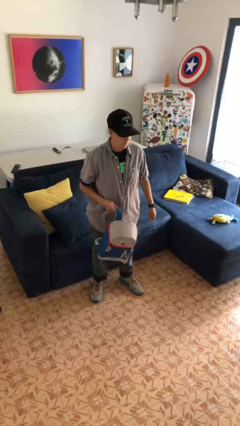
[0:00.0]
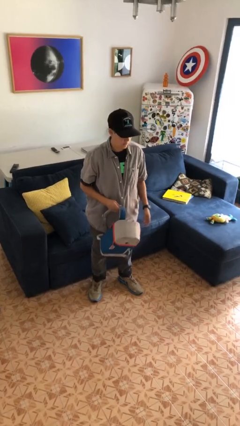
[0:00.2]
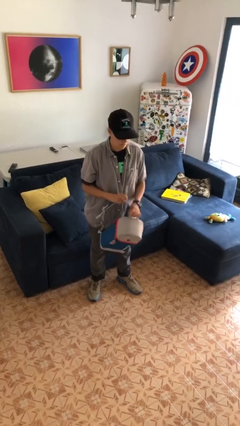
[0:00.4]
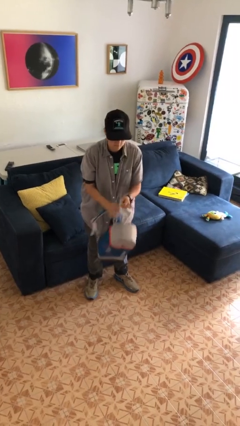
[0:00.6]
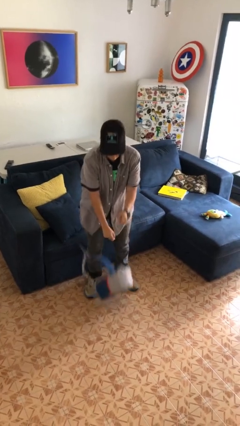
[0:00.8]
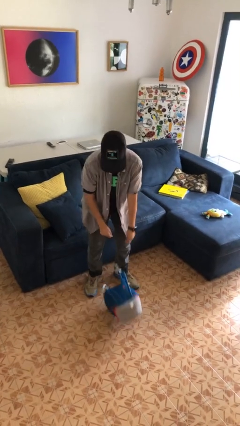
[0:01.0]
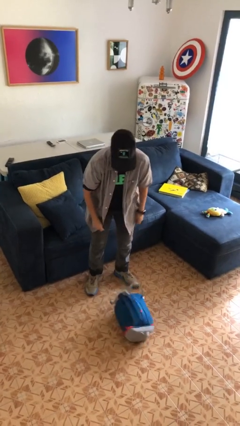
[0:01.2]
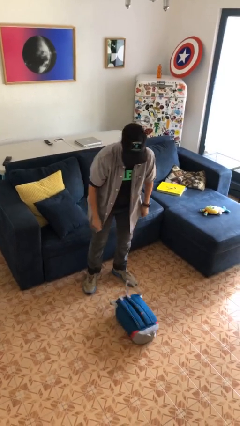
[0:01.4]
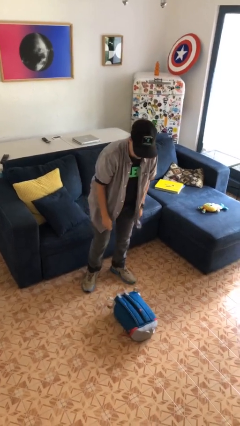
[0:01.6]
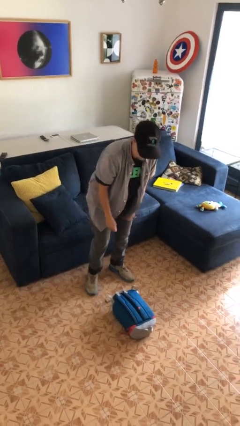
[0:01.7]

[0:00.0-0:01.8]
person drops object

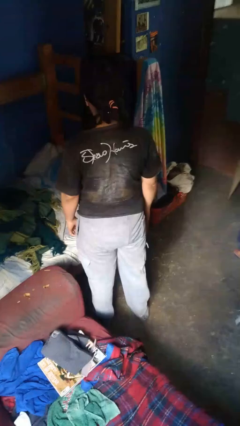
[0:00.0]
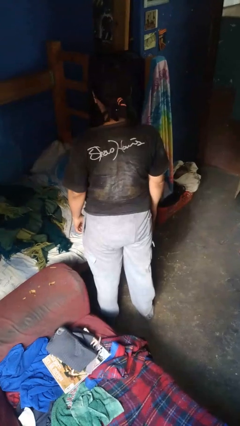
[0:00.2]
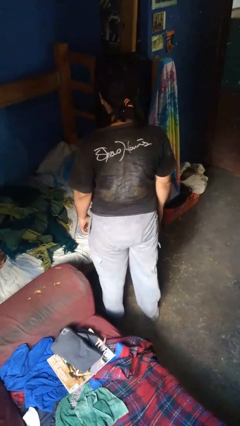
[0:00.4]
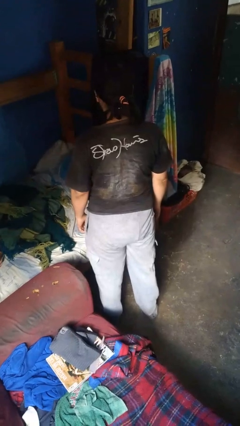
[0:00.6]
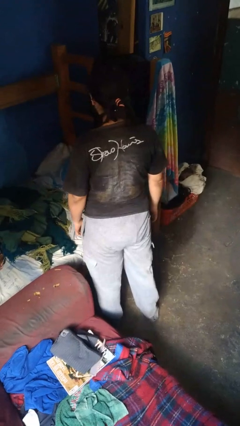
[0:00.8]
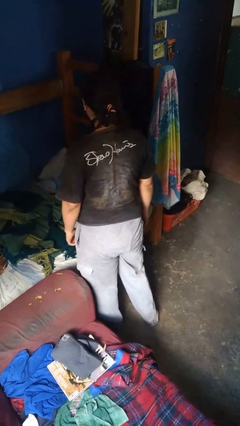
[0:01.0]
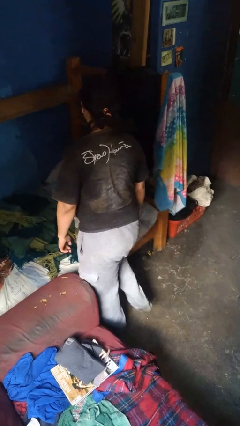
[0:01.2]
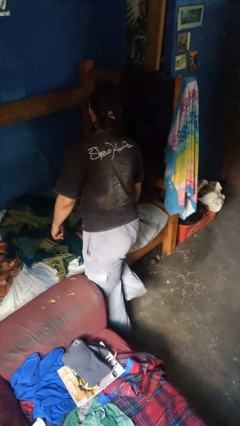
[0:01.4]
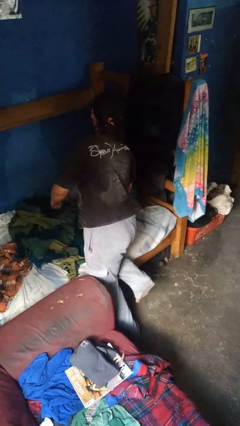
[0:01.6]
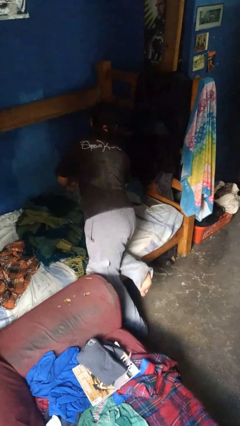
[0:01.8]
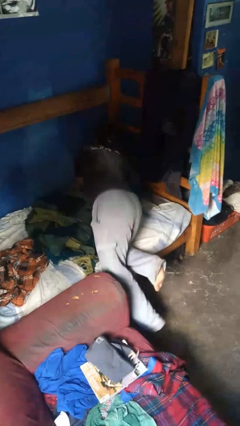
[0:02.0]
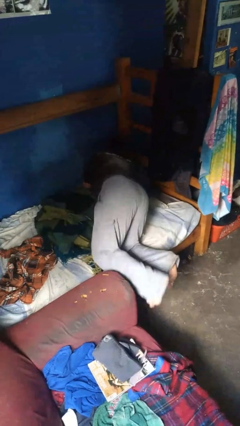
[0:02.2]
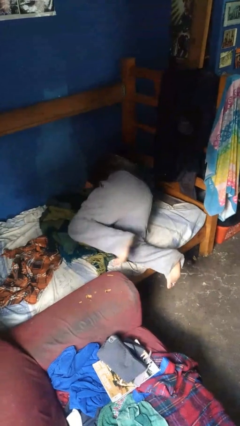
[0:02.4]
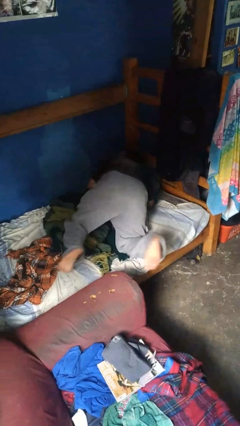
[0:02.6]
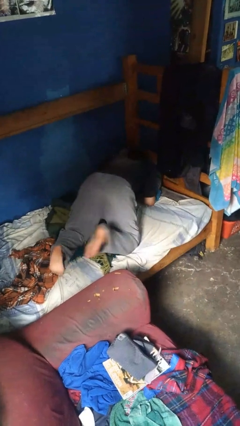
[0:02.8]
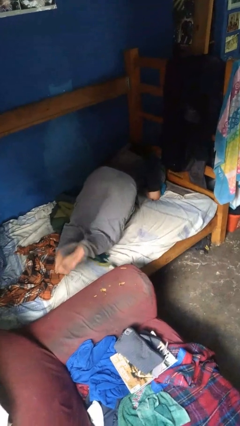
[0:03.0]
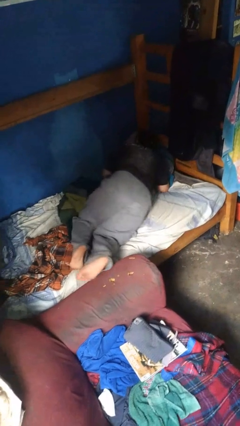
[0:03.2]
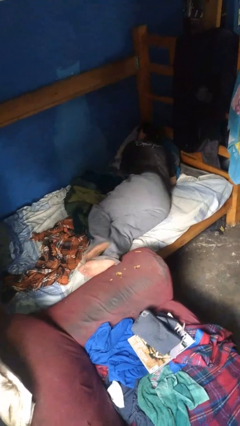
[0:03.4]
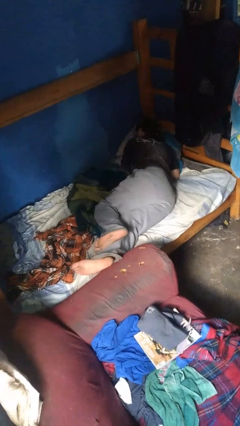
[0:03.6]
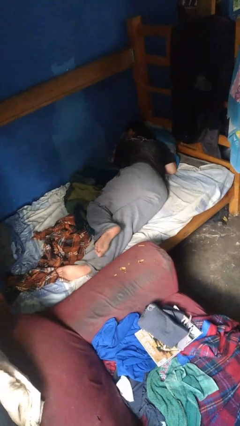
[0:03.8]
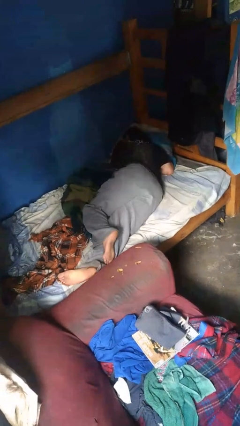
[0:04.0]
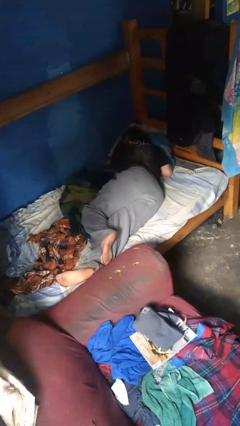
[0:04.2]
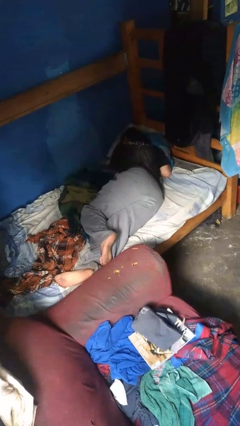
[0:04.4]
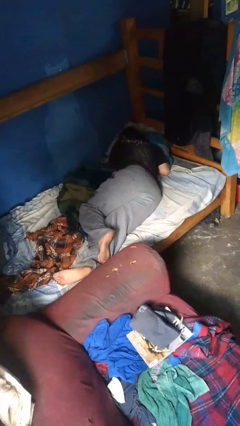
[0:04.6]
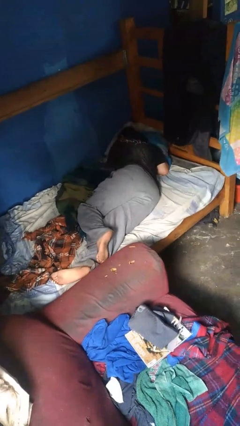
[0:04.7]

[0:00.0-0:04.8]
person lies down on bed

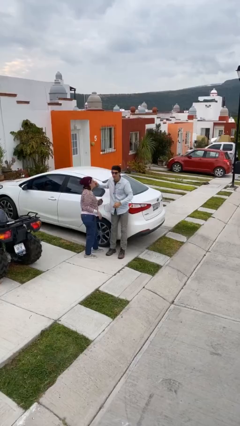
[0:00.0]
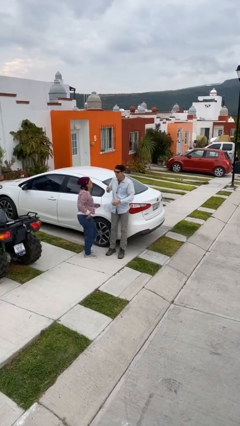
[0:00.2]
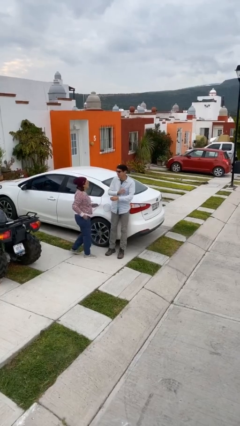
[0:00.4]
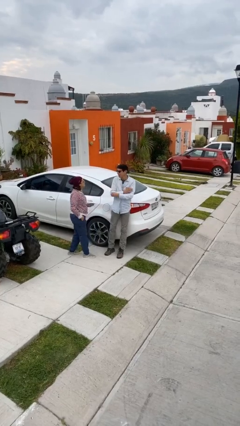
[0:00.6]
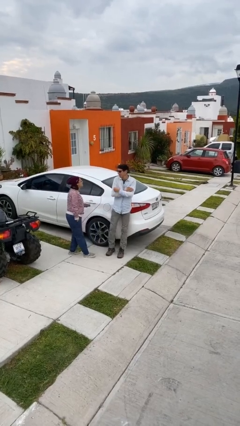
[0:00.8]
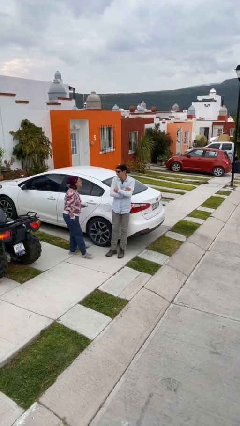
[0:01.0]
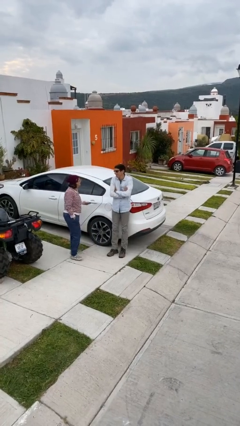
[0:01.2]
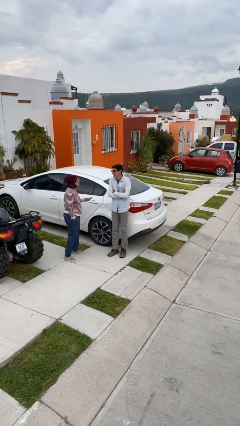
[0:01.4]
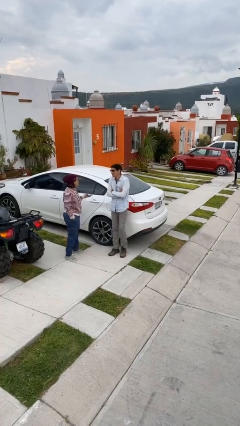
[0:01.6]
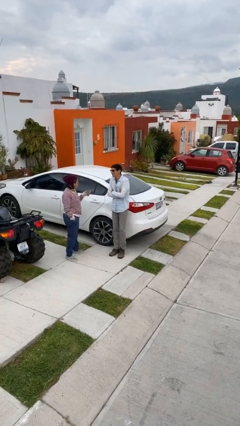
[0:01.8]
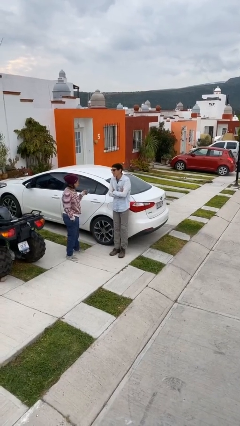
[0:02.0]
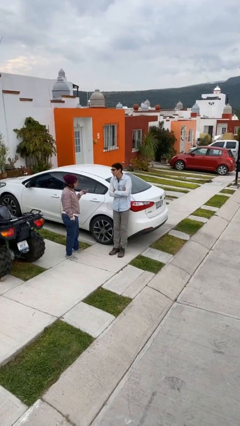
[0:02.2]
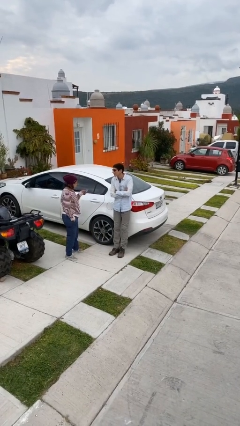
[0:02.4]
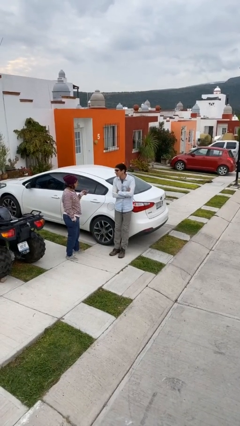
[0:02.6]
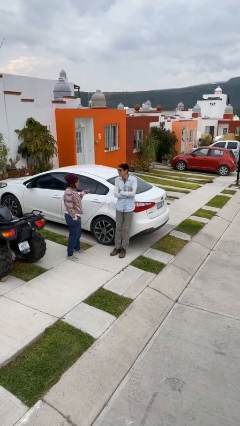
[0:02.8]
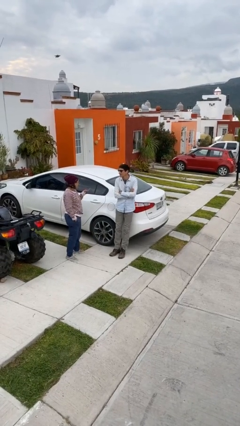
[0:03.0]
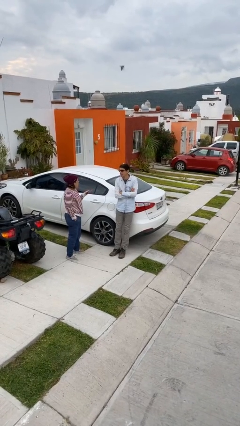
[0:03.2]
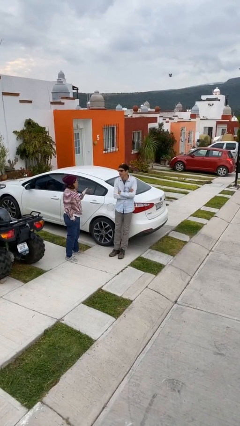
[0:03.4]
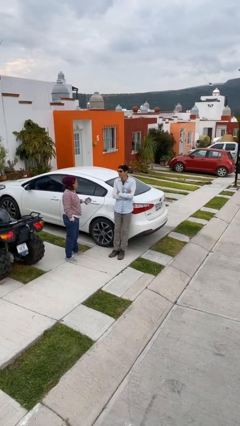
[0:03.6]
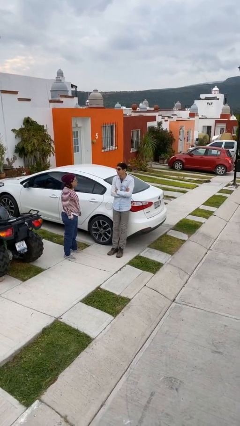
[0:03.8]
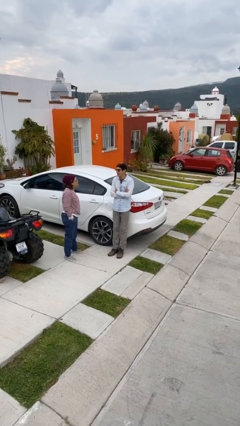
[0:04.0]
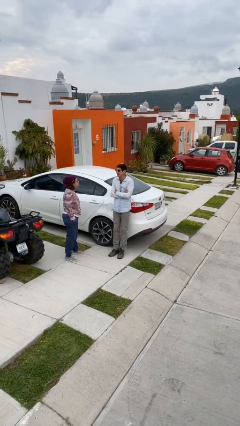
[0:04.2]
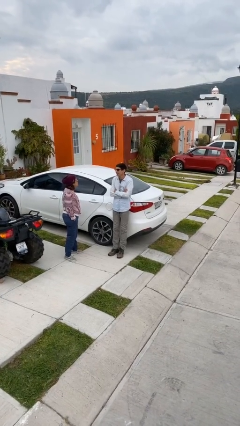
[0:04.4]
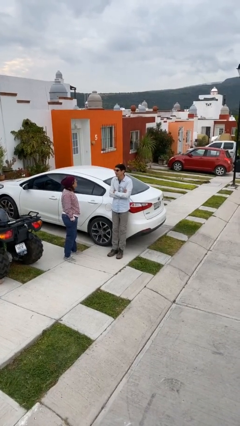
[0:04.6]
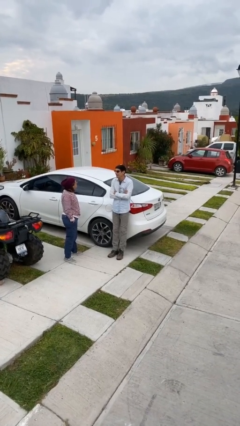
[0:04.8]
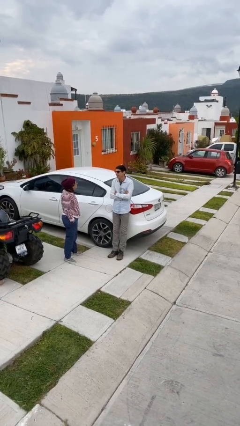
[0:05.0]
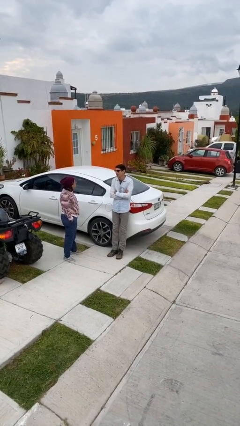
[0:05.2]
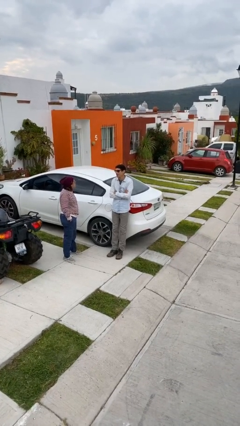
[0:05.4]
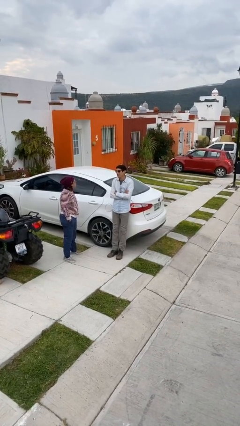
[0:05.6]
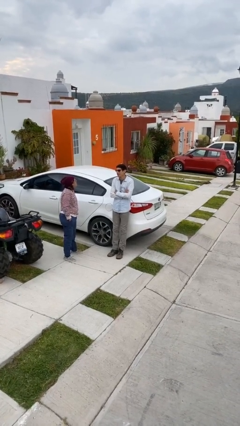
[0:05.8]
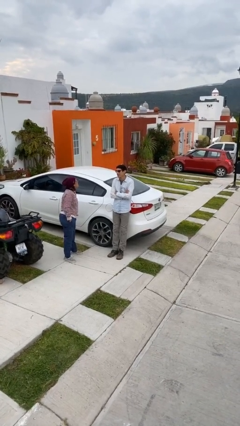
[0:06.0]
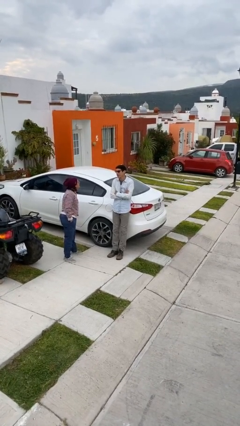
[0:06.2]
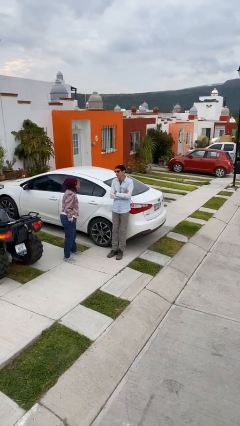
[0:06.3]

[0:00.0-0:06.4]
person talks to person

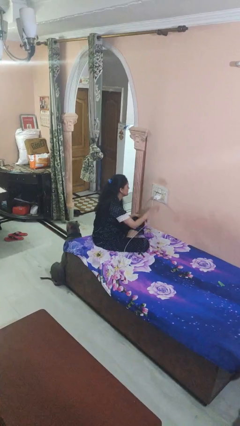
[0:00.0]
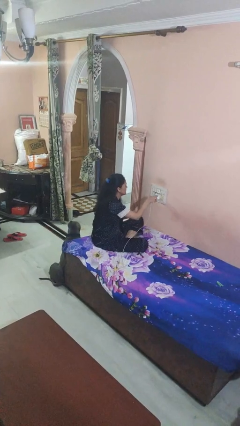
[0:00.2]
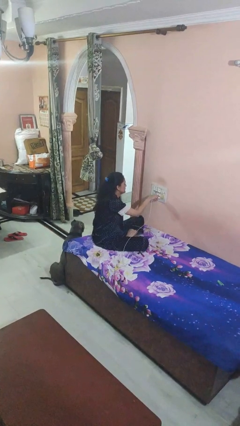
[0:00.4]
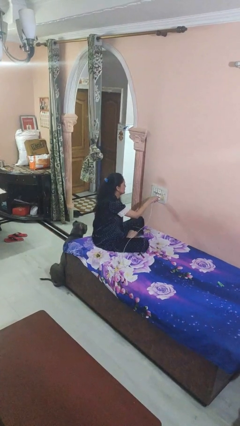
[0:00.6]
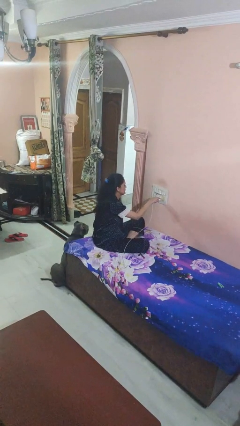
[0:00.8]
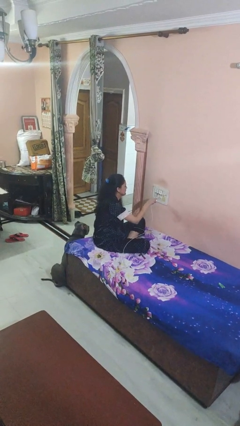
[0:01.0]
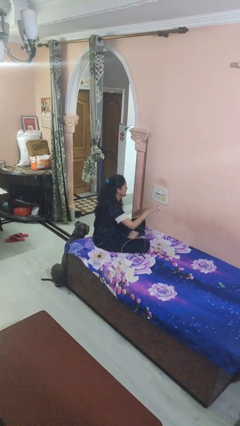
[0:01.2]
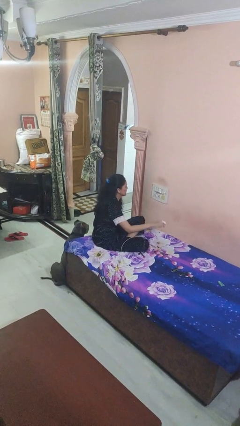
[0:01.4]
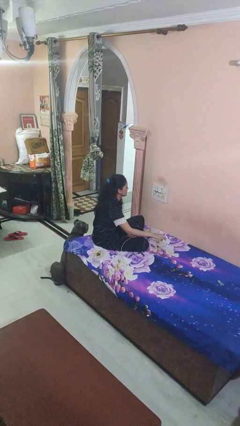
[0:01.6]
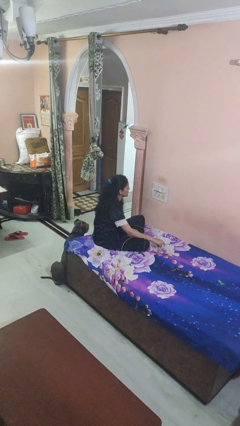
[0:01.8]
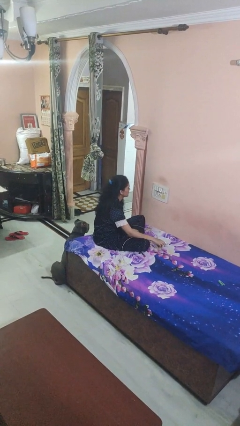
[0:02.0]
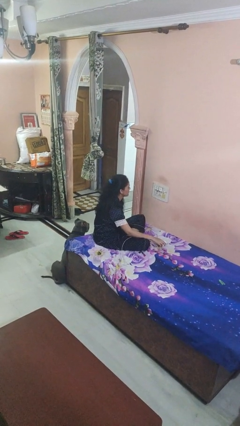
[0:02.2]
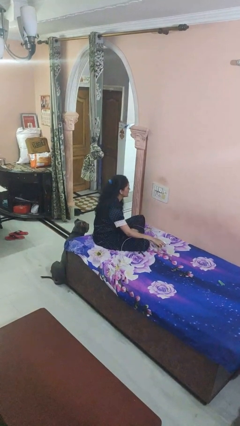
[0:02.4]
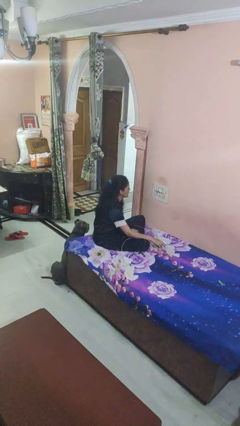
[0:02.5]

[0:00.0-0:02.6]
person unplugs from electrical socket

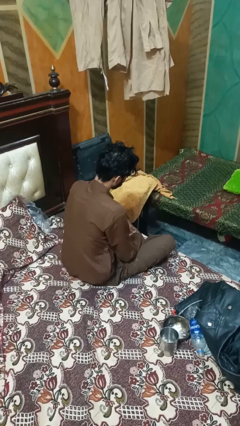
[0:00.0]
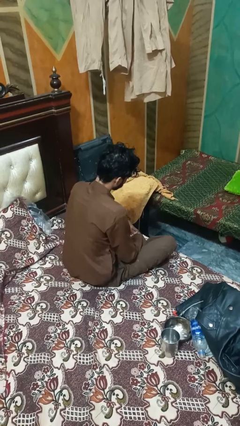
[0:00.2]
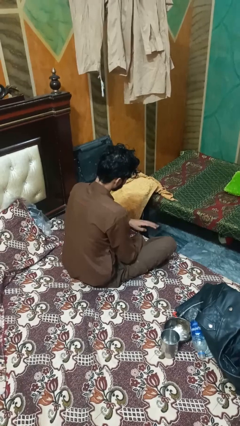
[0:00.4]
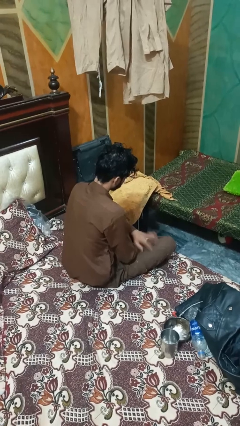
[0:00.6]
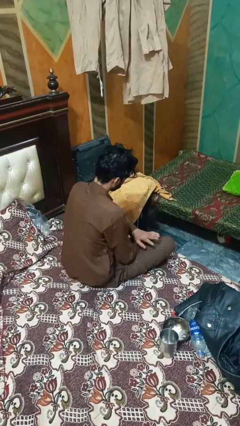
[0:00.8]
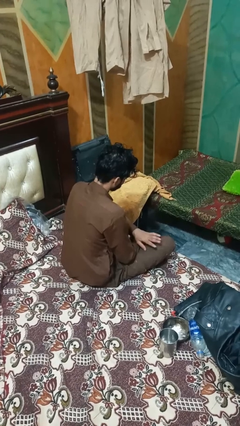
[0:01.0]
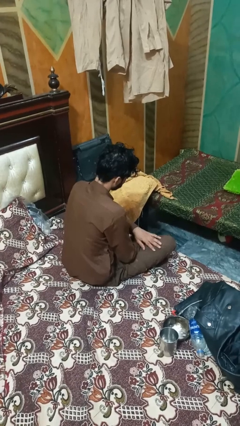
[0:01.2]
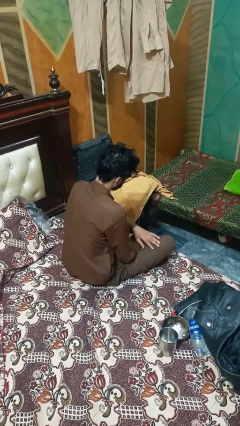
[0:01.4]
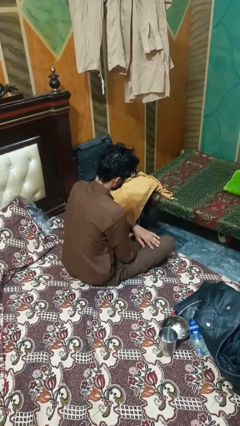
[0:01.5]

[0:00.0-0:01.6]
person slaps hands on thighs

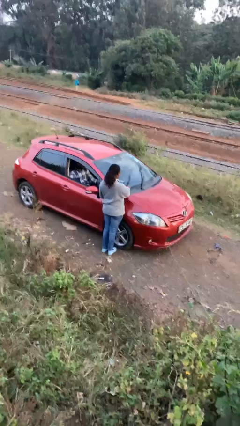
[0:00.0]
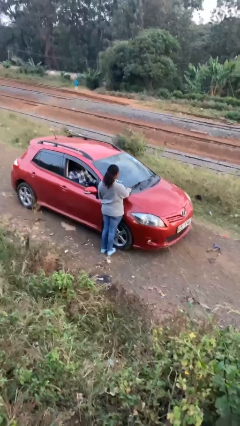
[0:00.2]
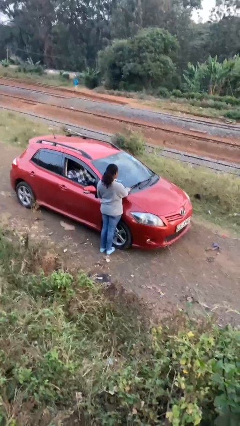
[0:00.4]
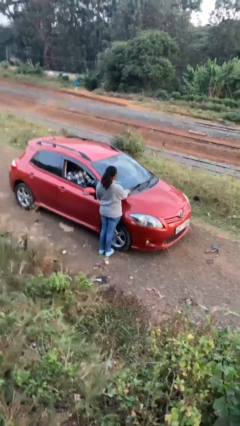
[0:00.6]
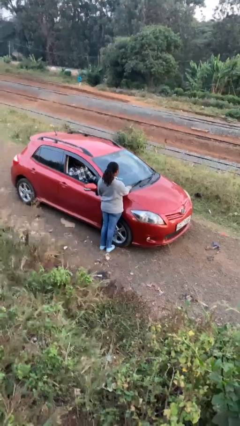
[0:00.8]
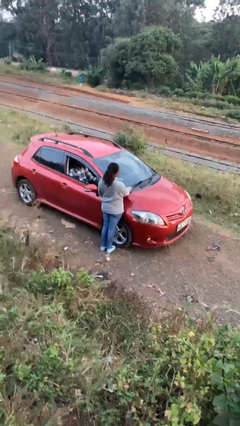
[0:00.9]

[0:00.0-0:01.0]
person flips down car wipers
